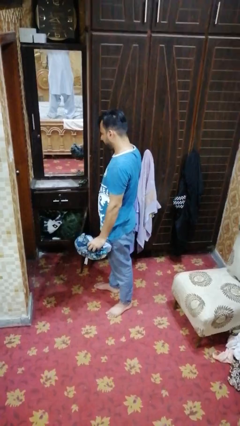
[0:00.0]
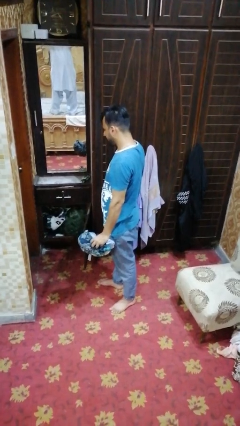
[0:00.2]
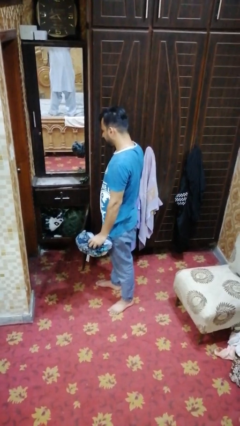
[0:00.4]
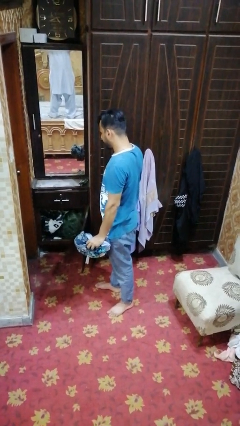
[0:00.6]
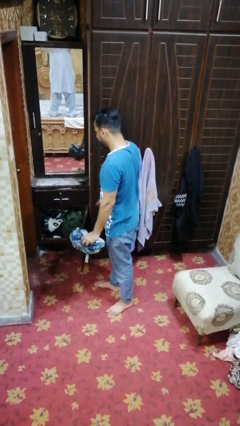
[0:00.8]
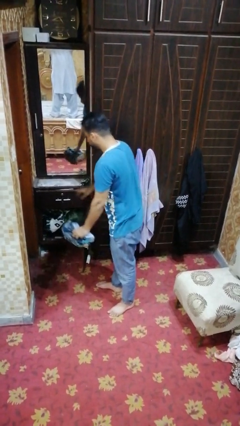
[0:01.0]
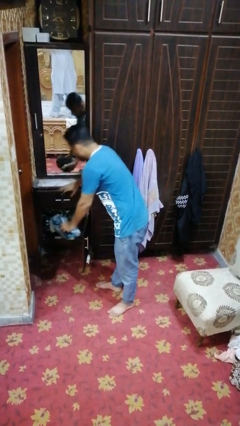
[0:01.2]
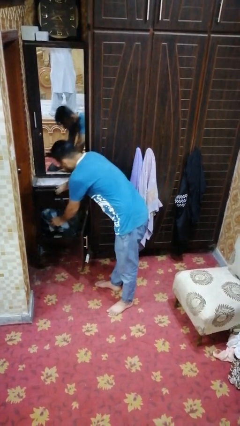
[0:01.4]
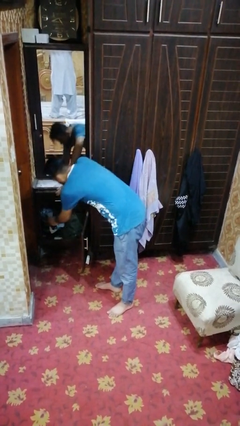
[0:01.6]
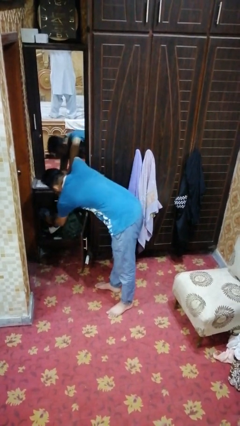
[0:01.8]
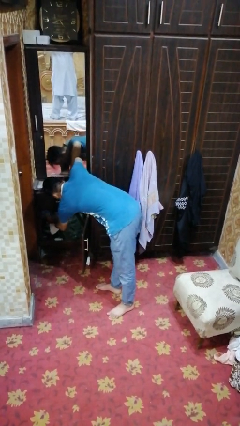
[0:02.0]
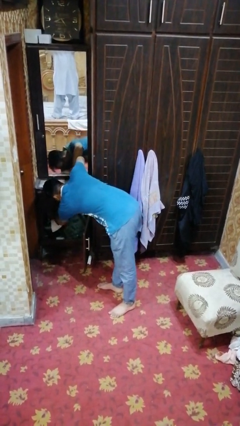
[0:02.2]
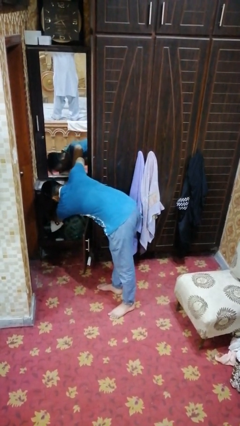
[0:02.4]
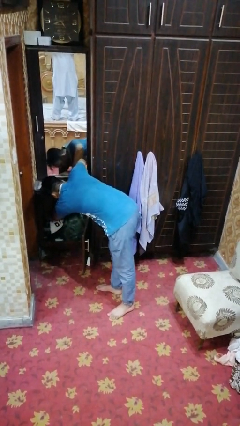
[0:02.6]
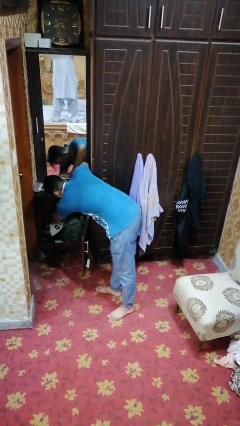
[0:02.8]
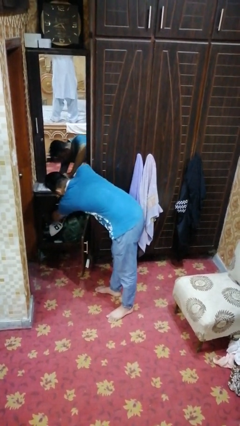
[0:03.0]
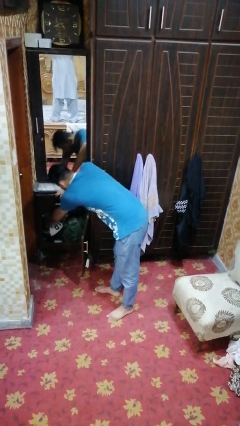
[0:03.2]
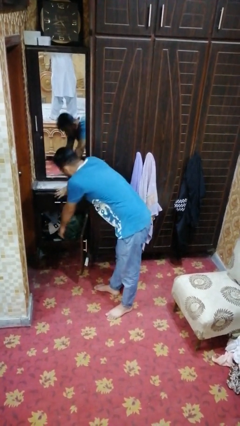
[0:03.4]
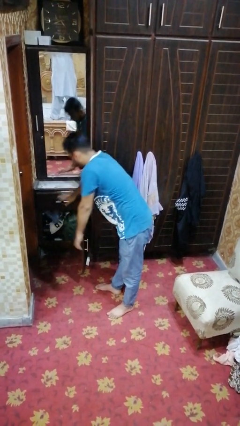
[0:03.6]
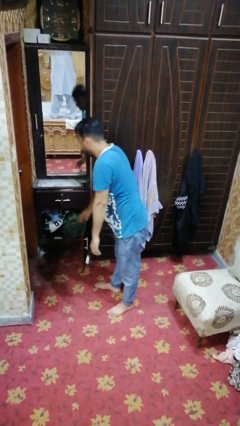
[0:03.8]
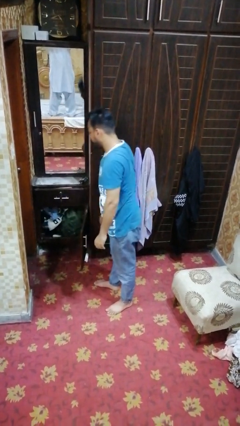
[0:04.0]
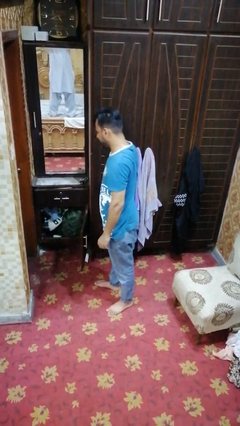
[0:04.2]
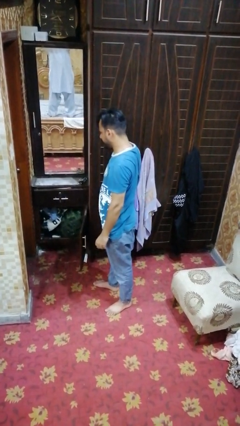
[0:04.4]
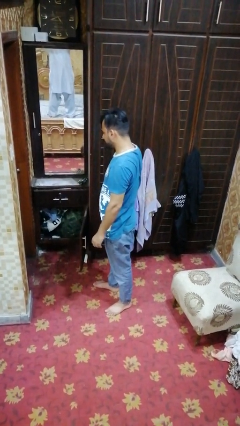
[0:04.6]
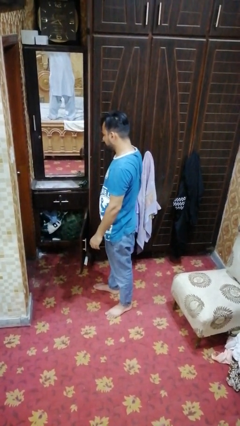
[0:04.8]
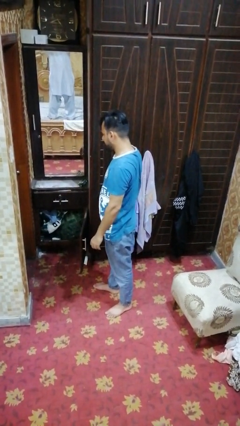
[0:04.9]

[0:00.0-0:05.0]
person puts clothes into dresser

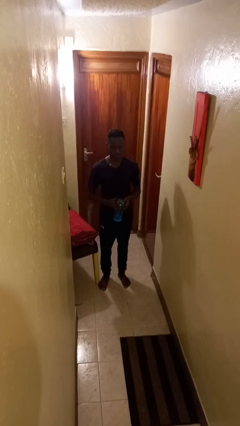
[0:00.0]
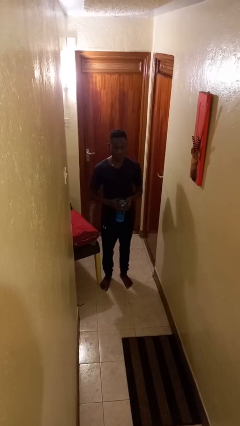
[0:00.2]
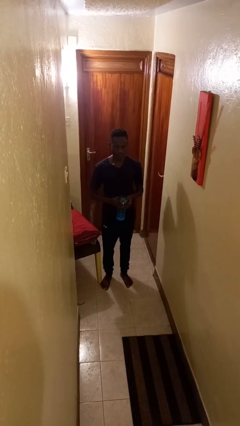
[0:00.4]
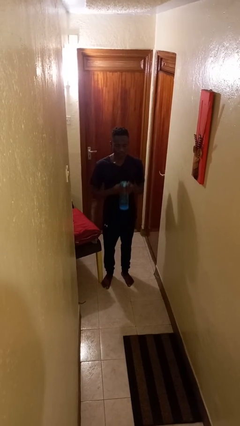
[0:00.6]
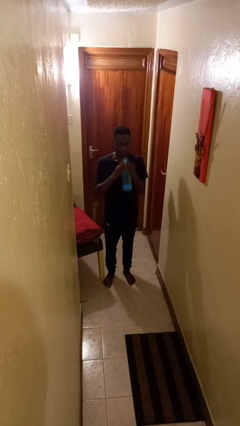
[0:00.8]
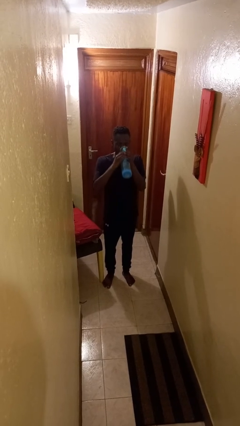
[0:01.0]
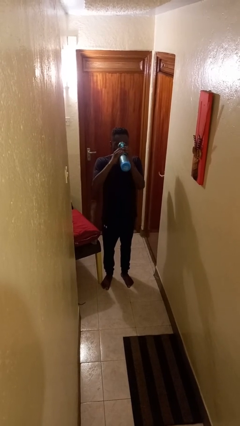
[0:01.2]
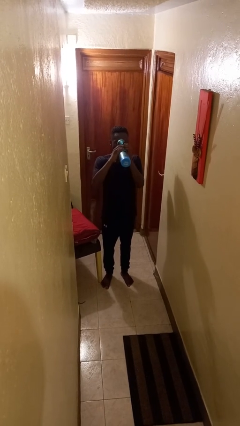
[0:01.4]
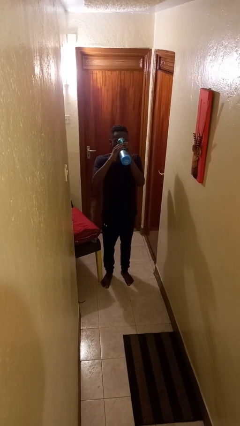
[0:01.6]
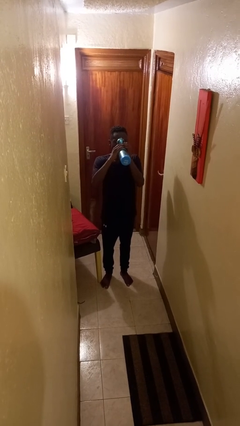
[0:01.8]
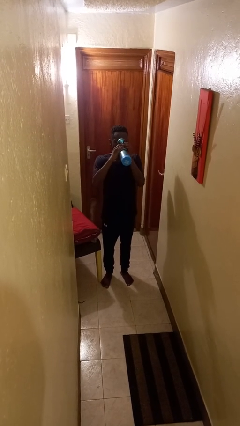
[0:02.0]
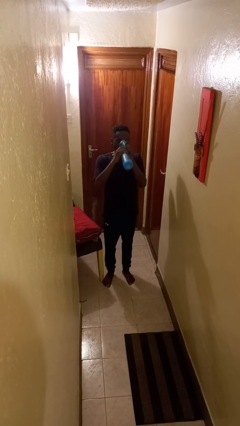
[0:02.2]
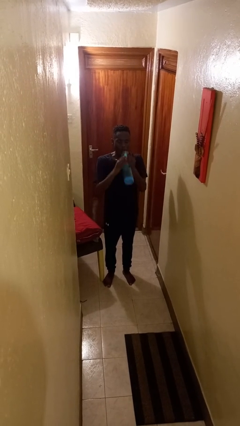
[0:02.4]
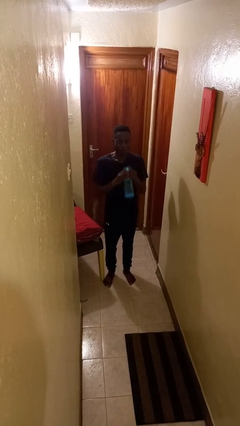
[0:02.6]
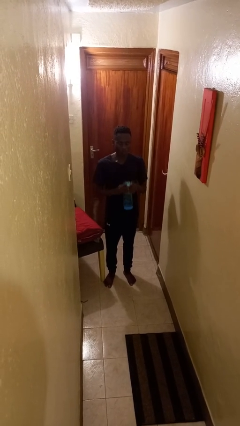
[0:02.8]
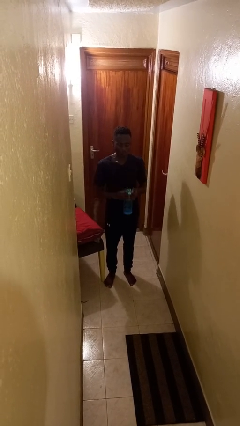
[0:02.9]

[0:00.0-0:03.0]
person drinks from bottle

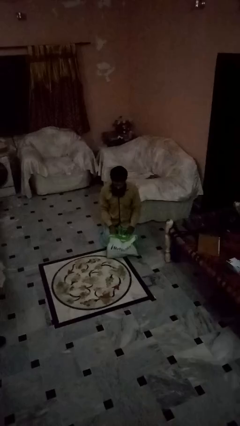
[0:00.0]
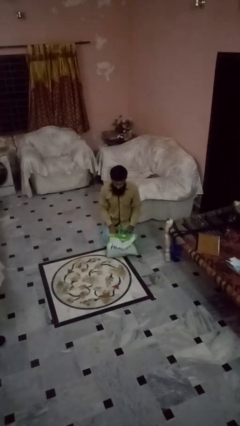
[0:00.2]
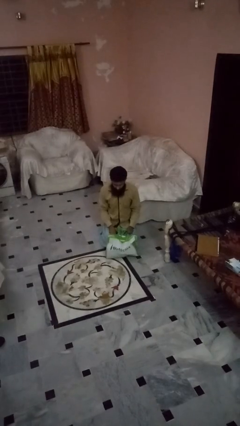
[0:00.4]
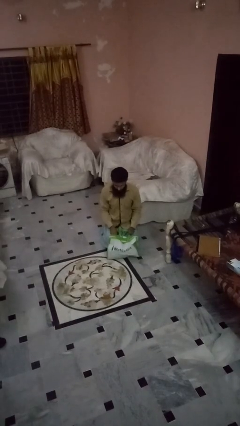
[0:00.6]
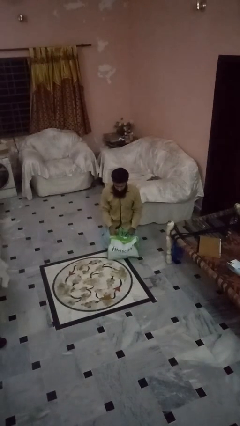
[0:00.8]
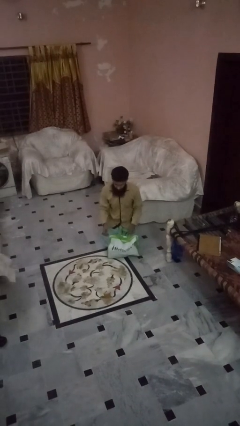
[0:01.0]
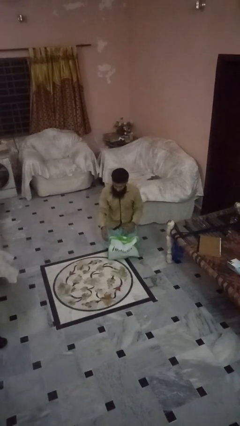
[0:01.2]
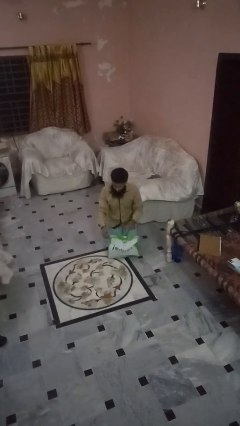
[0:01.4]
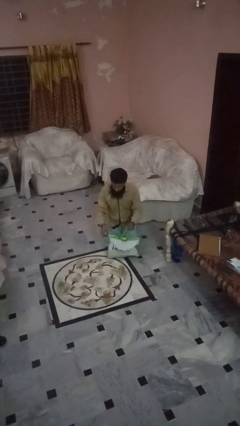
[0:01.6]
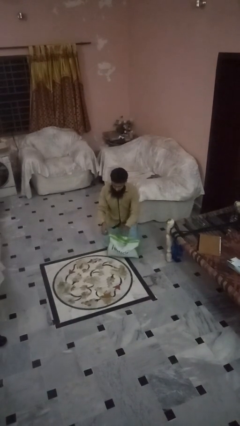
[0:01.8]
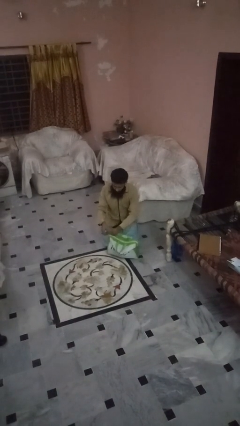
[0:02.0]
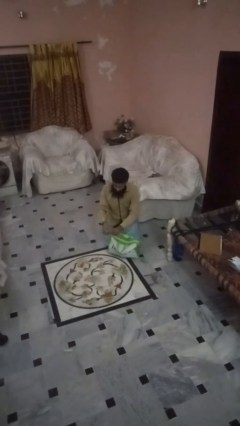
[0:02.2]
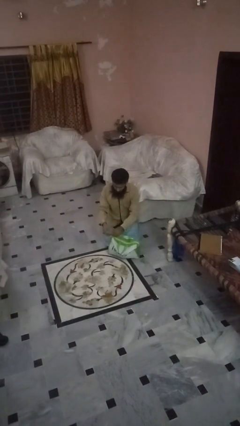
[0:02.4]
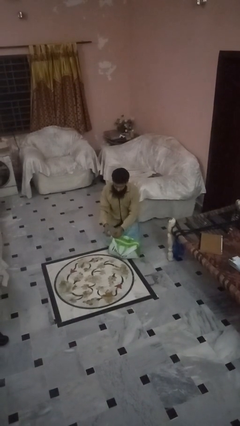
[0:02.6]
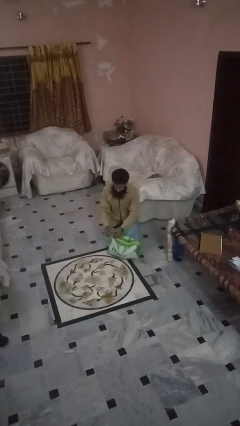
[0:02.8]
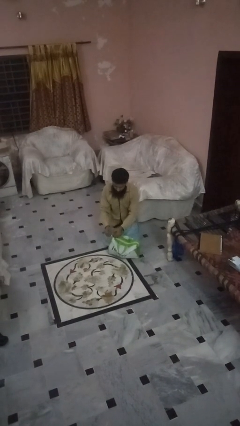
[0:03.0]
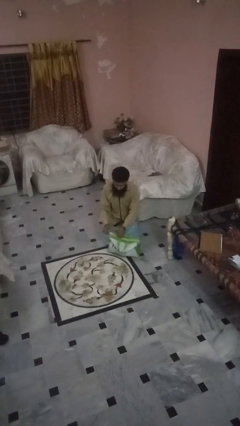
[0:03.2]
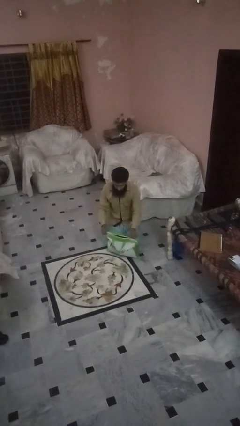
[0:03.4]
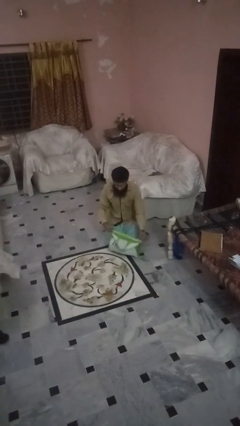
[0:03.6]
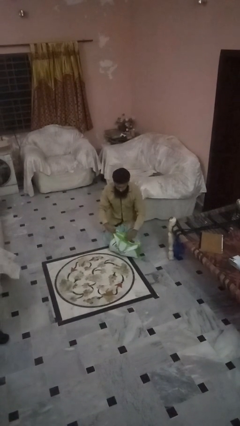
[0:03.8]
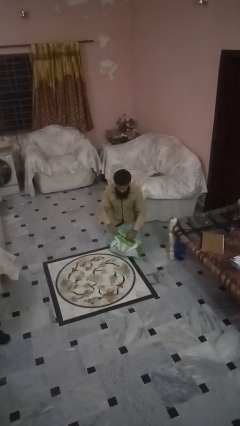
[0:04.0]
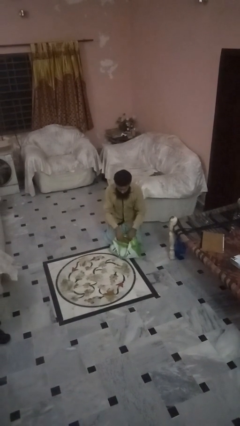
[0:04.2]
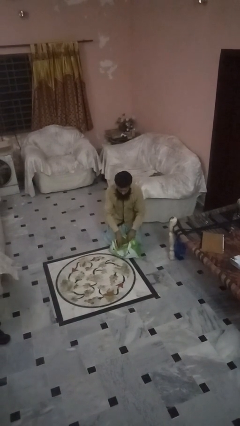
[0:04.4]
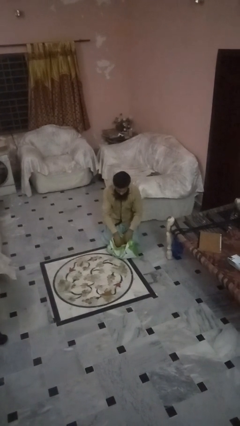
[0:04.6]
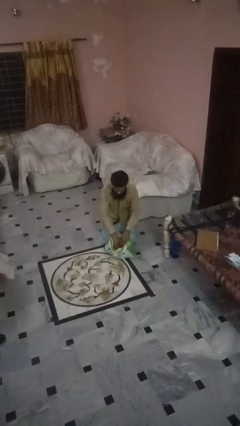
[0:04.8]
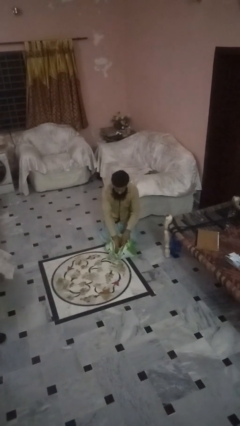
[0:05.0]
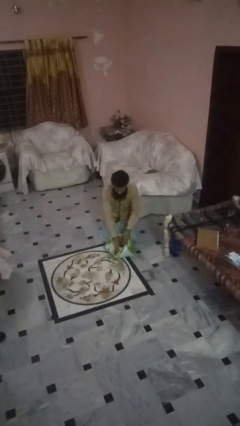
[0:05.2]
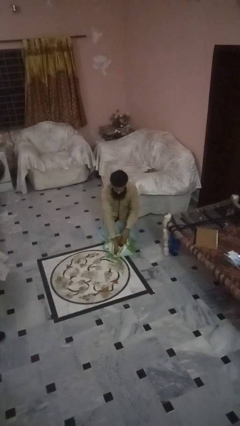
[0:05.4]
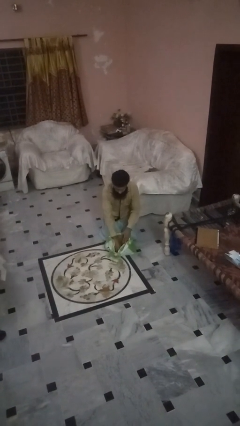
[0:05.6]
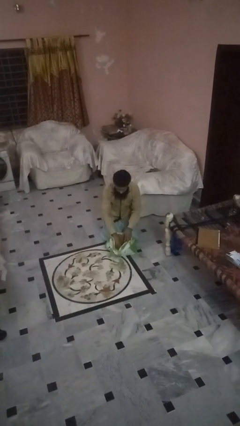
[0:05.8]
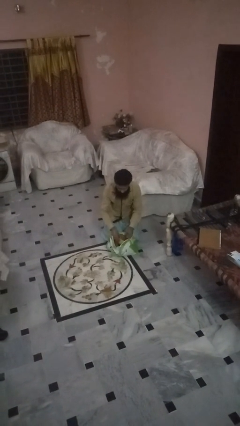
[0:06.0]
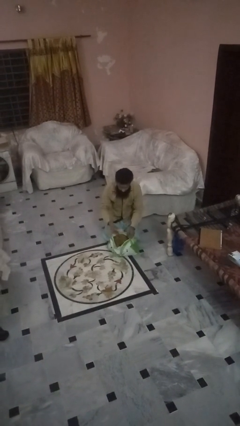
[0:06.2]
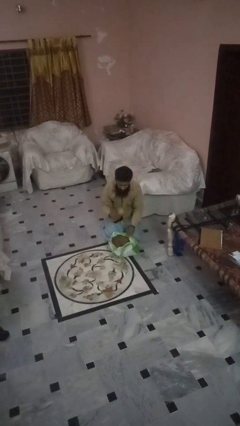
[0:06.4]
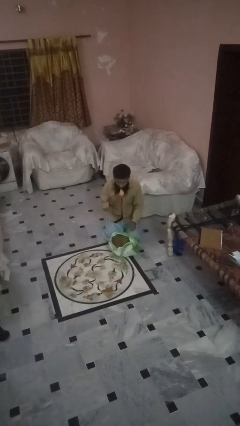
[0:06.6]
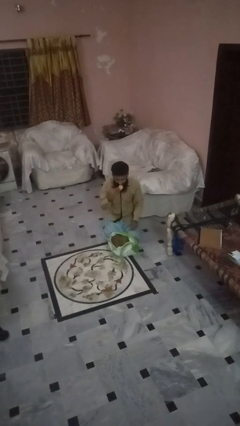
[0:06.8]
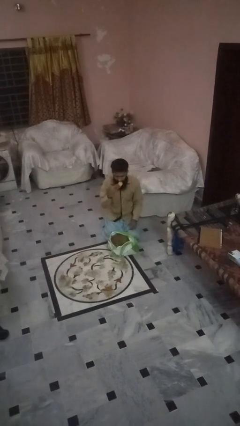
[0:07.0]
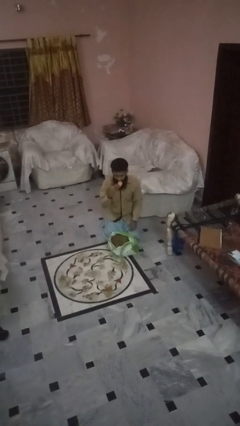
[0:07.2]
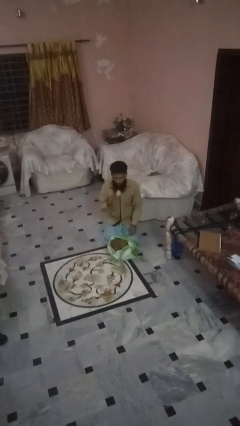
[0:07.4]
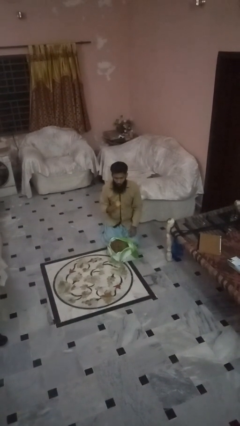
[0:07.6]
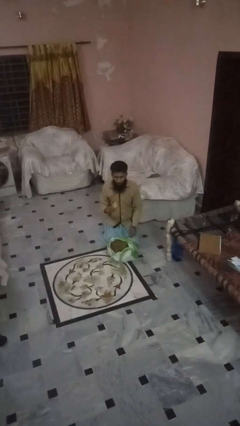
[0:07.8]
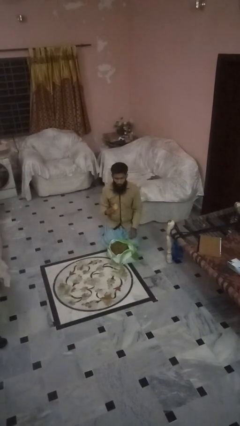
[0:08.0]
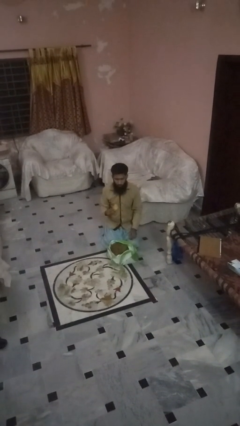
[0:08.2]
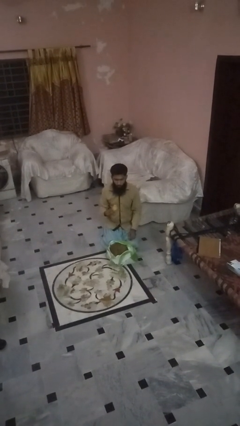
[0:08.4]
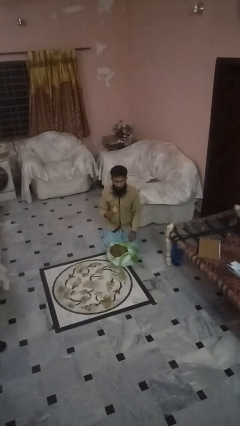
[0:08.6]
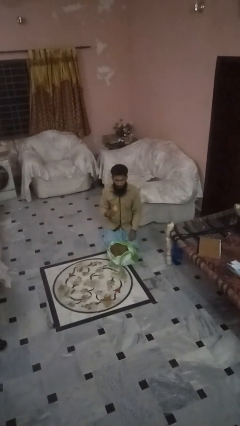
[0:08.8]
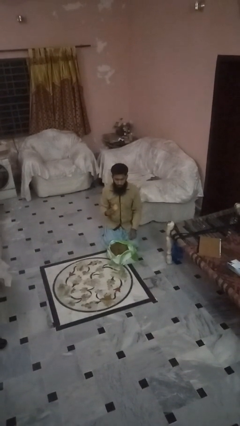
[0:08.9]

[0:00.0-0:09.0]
person eats snack from bag

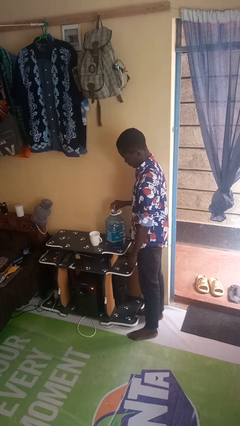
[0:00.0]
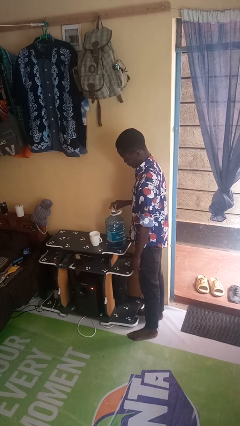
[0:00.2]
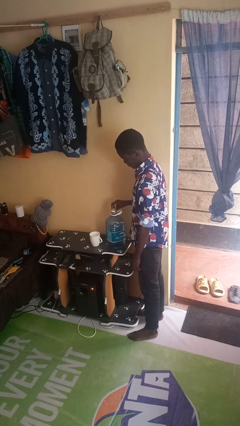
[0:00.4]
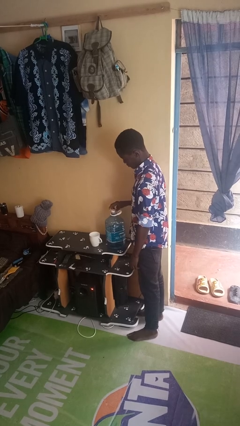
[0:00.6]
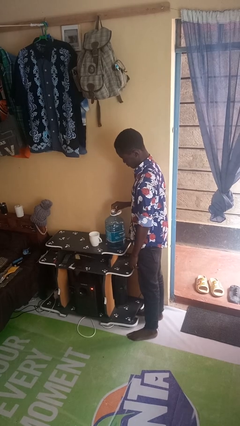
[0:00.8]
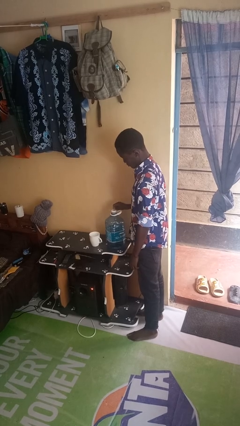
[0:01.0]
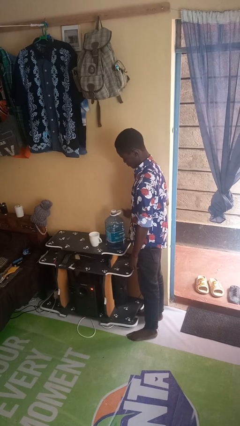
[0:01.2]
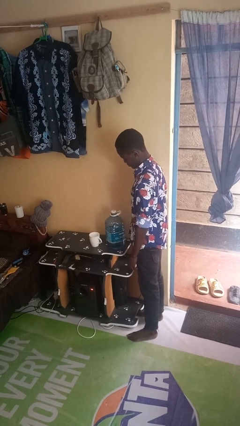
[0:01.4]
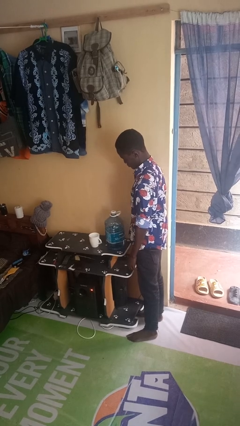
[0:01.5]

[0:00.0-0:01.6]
person screws lid to bottle
